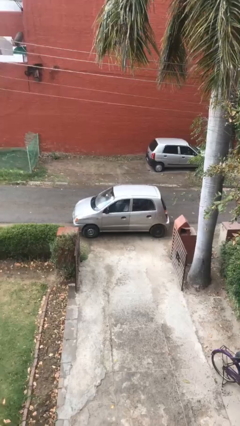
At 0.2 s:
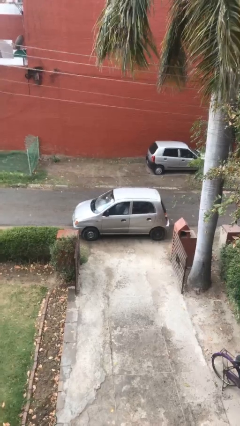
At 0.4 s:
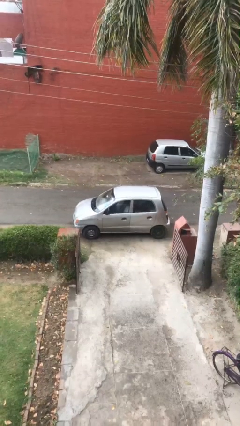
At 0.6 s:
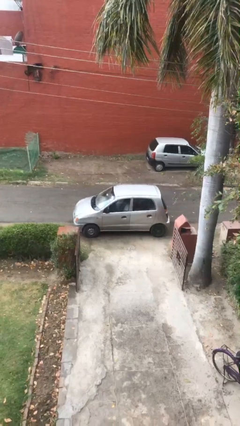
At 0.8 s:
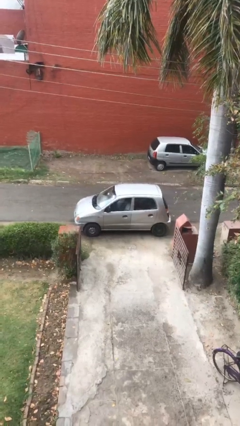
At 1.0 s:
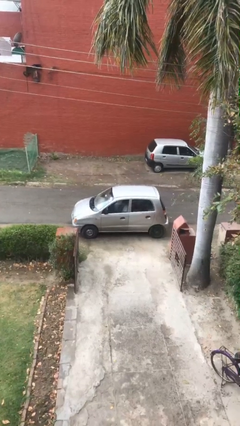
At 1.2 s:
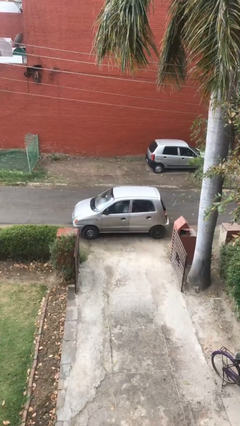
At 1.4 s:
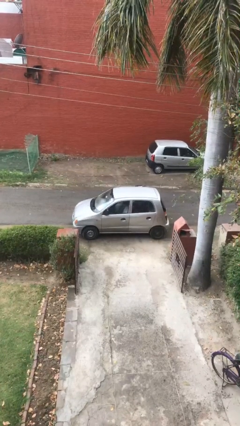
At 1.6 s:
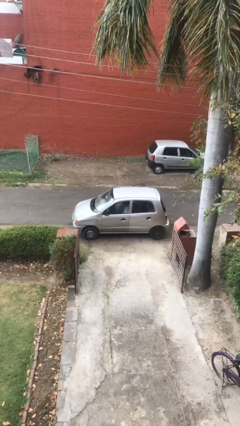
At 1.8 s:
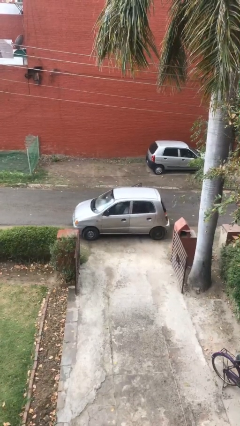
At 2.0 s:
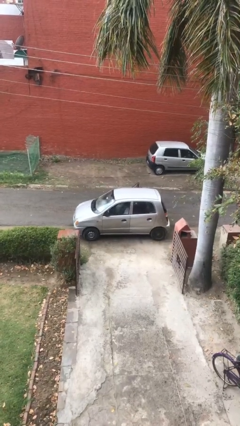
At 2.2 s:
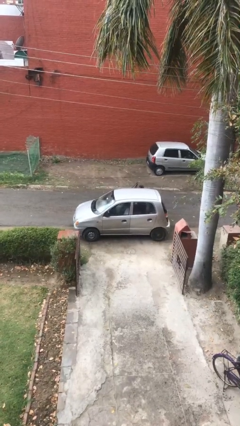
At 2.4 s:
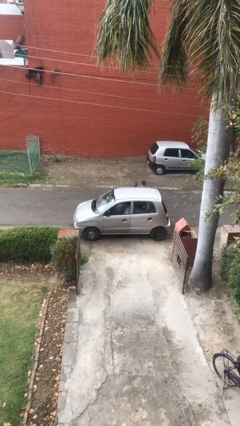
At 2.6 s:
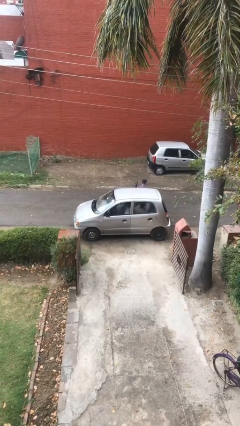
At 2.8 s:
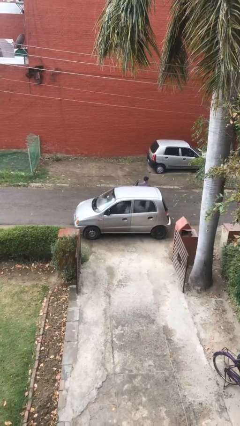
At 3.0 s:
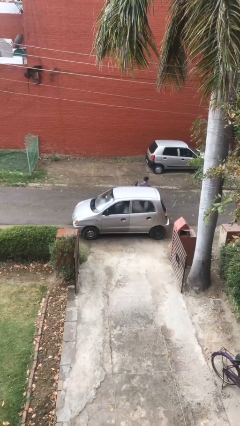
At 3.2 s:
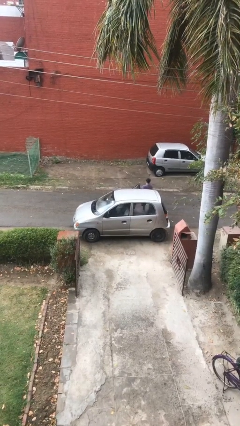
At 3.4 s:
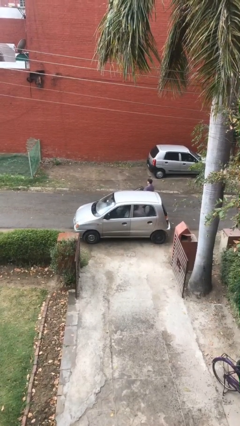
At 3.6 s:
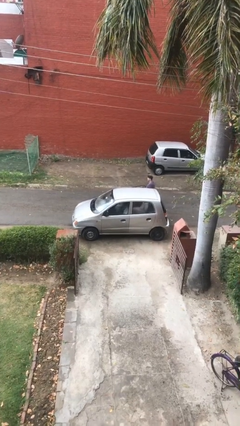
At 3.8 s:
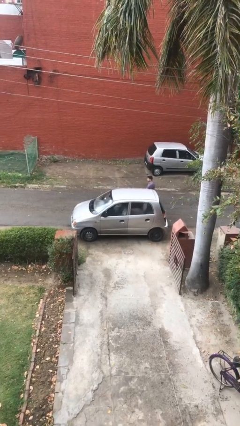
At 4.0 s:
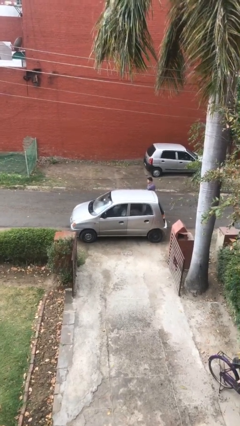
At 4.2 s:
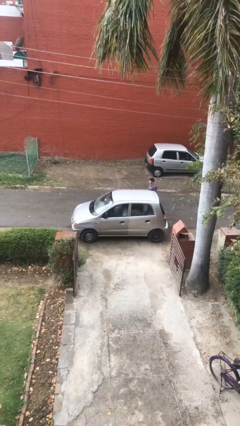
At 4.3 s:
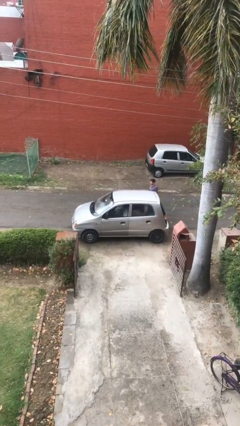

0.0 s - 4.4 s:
car drops off person

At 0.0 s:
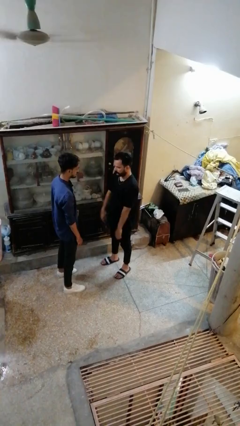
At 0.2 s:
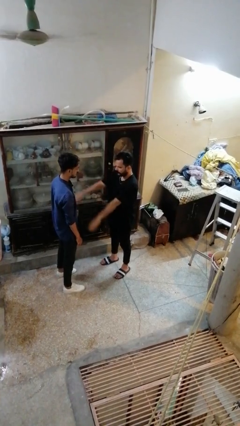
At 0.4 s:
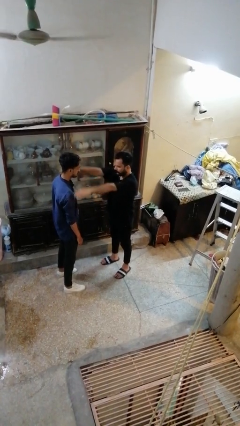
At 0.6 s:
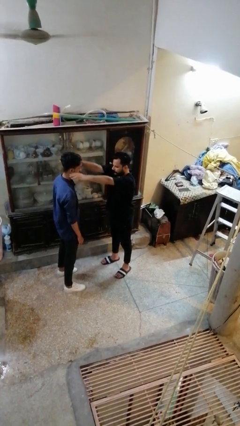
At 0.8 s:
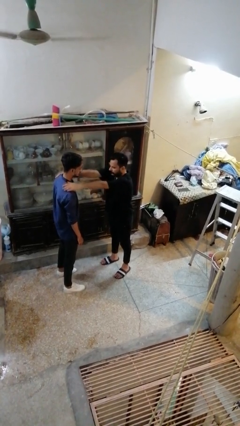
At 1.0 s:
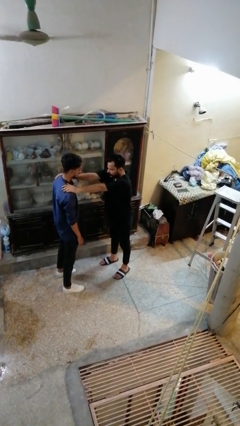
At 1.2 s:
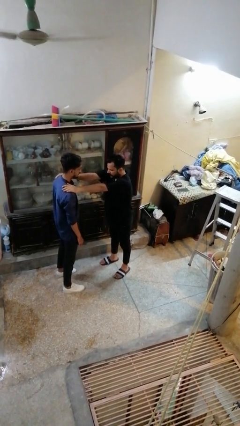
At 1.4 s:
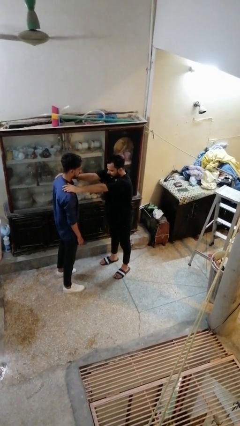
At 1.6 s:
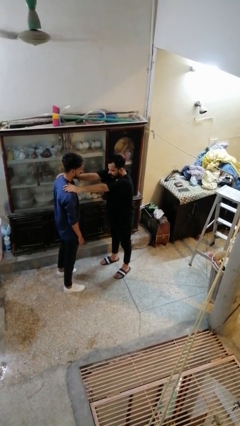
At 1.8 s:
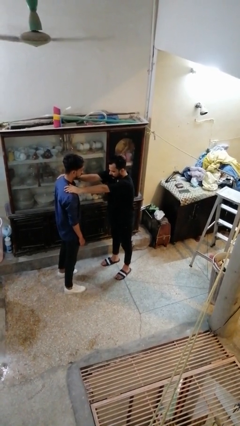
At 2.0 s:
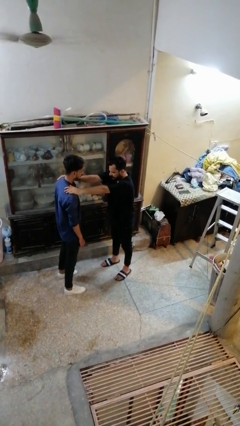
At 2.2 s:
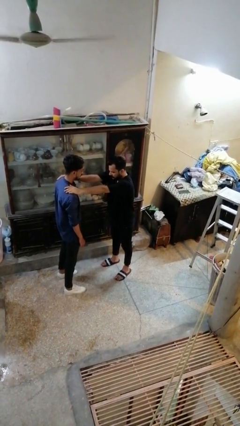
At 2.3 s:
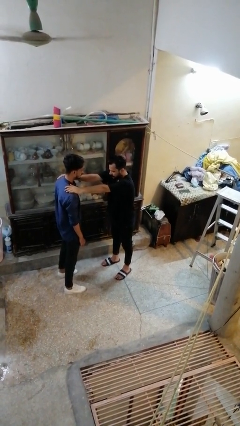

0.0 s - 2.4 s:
person pounds shoulders of person

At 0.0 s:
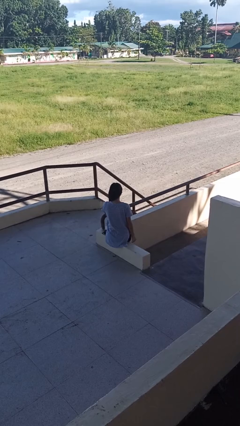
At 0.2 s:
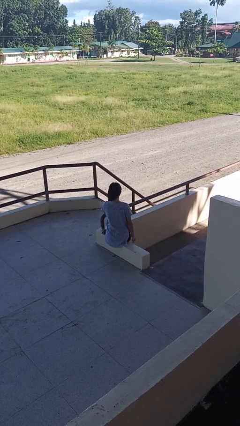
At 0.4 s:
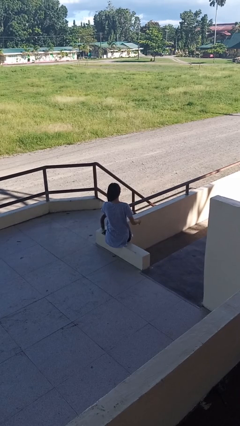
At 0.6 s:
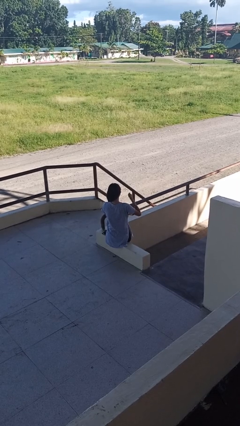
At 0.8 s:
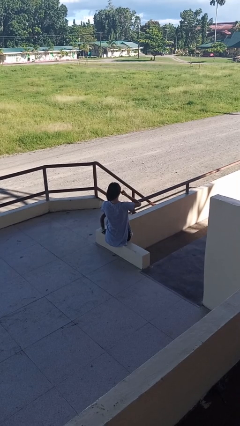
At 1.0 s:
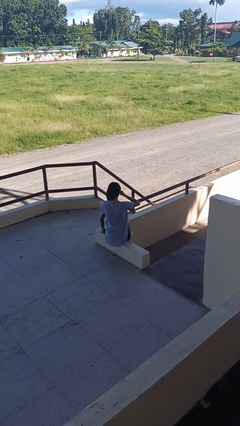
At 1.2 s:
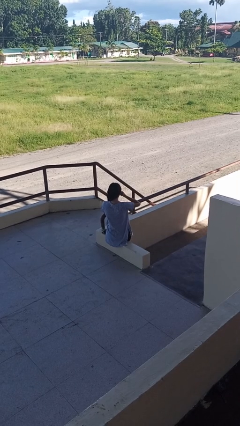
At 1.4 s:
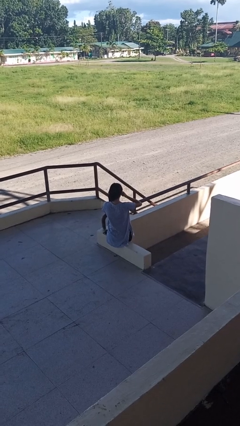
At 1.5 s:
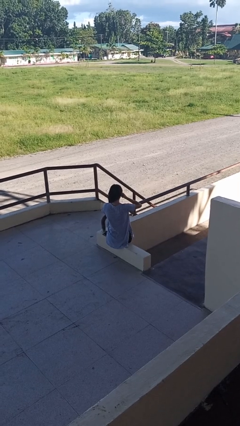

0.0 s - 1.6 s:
person gestures call me

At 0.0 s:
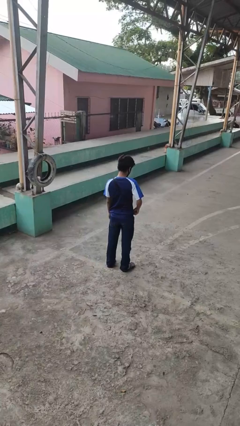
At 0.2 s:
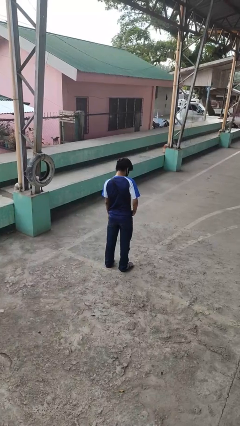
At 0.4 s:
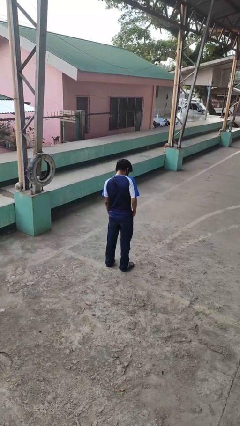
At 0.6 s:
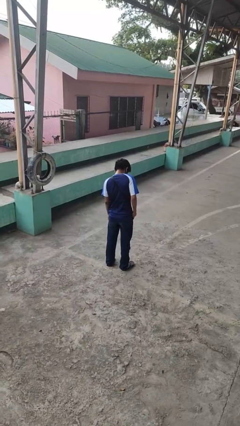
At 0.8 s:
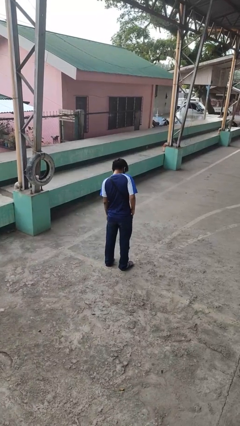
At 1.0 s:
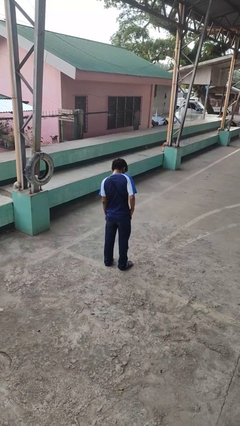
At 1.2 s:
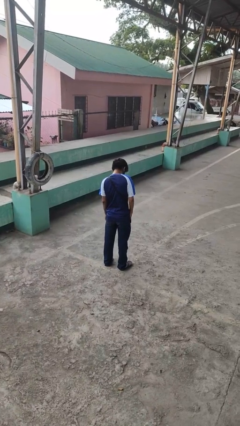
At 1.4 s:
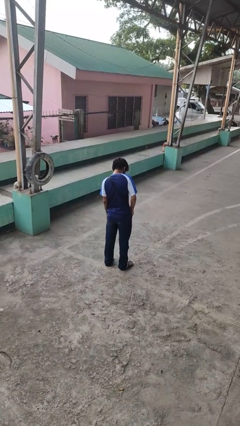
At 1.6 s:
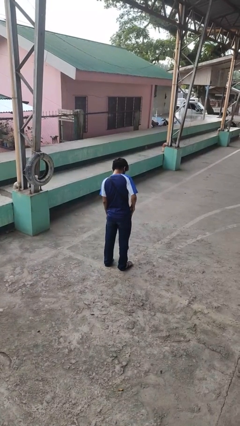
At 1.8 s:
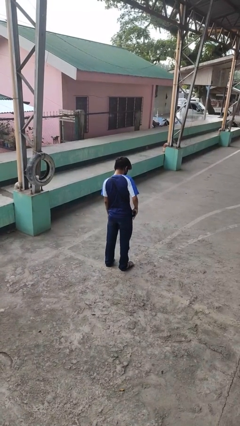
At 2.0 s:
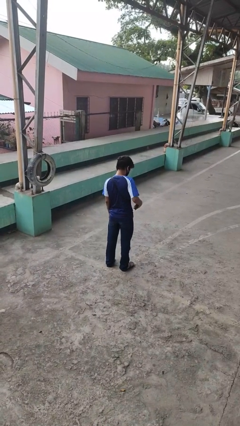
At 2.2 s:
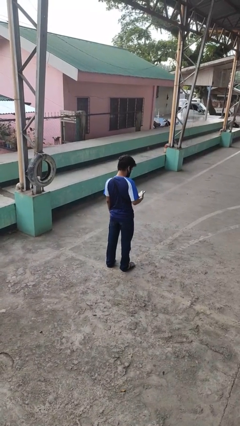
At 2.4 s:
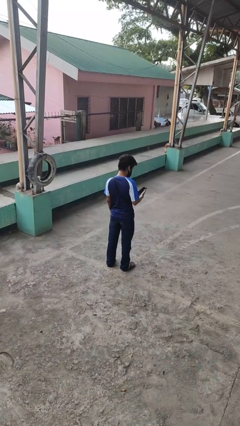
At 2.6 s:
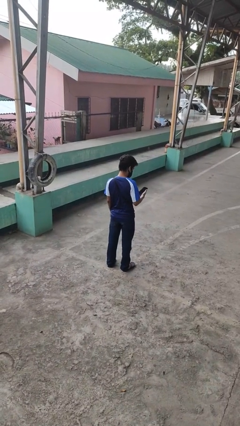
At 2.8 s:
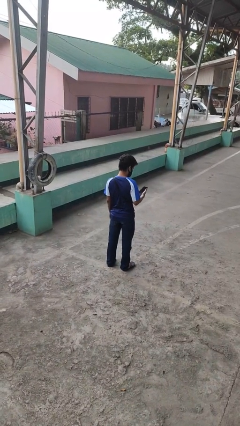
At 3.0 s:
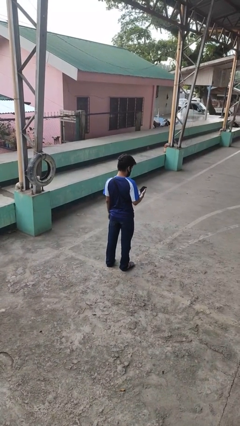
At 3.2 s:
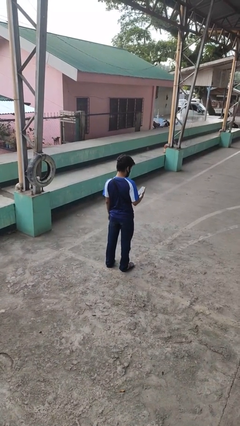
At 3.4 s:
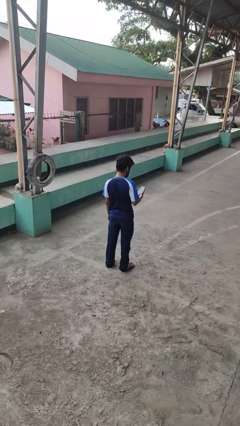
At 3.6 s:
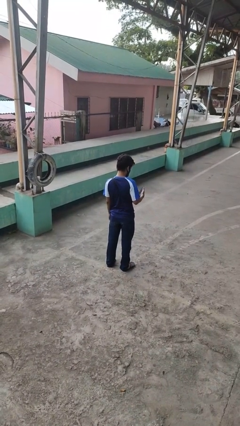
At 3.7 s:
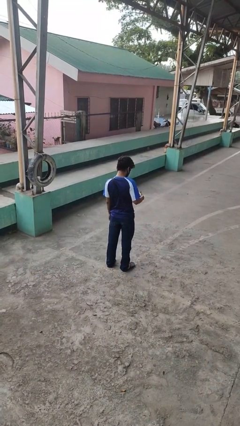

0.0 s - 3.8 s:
person takes phone from pocket

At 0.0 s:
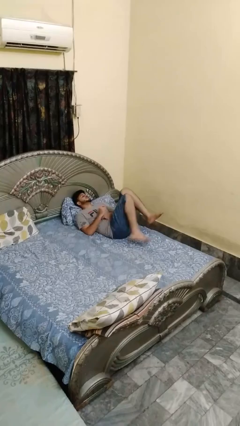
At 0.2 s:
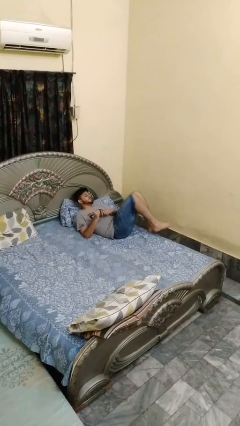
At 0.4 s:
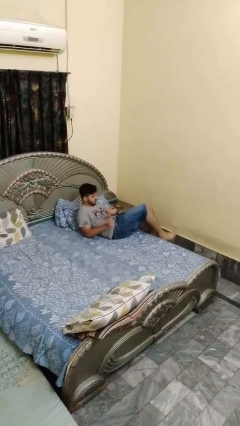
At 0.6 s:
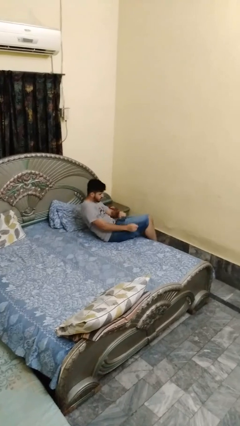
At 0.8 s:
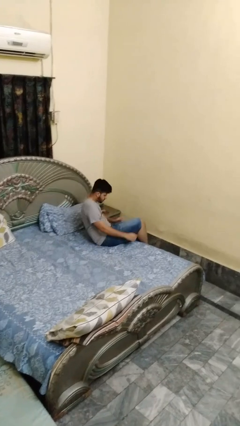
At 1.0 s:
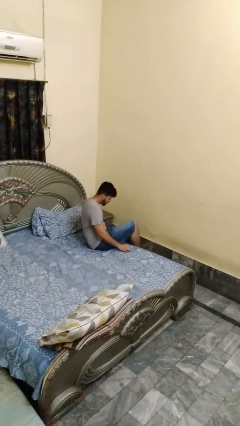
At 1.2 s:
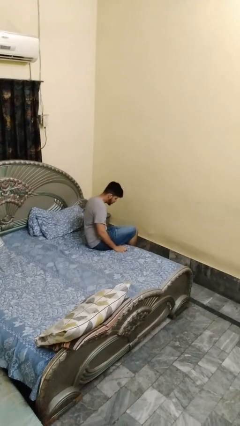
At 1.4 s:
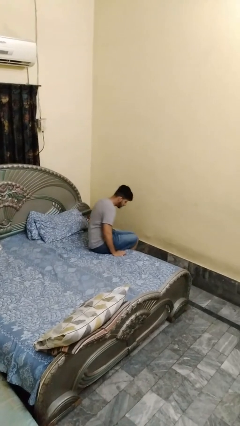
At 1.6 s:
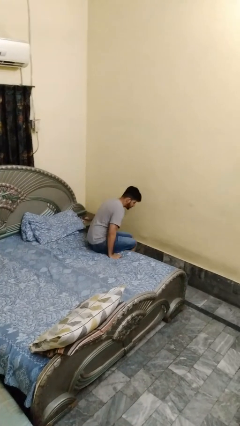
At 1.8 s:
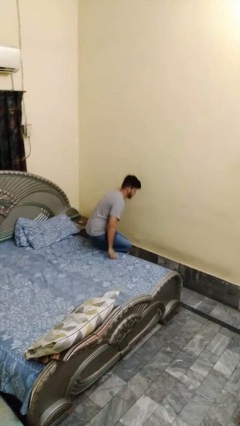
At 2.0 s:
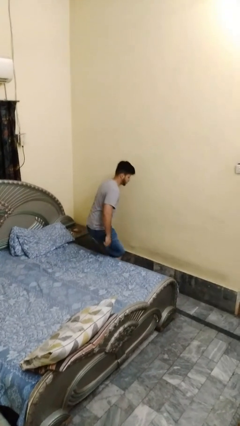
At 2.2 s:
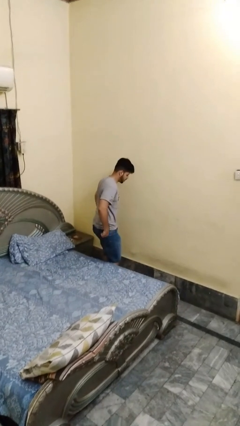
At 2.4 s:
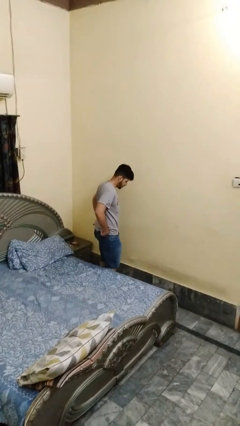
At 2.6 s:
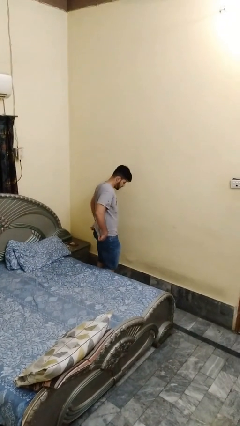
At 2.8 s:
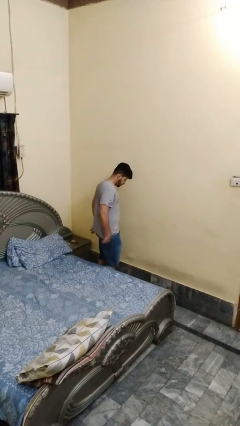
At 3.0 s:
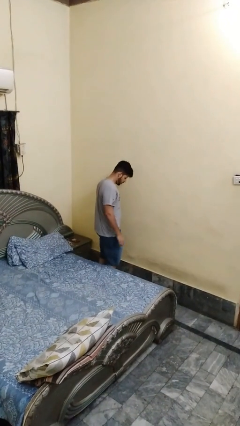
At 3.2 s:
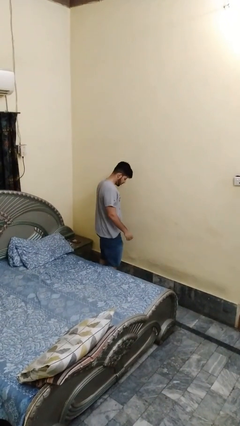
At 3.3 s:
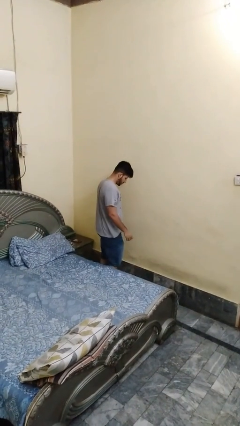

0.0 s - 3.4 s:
person stands up

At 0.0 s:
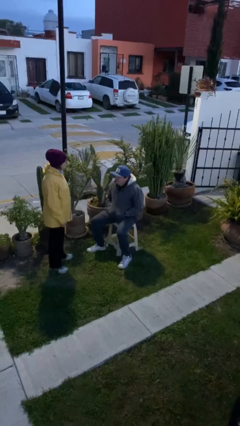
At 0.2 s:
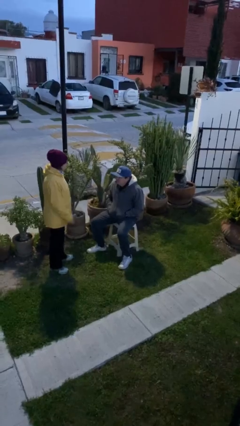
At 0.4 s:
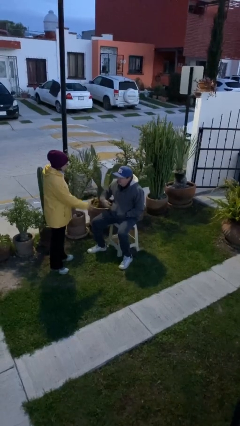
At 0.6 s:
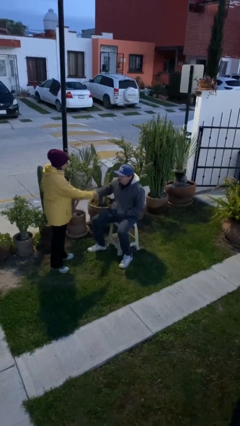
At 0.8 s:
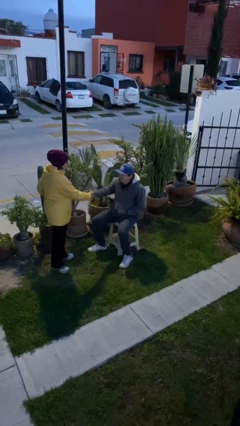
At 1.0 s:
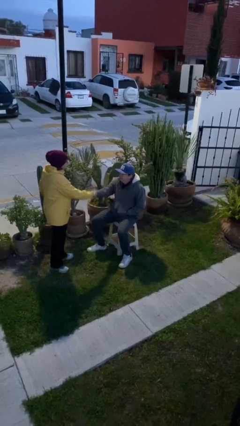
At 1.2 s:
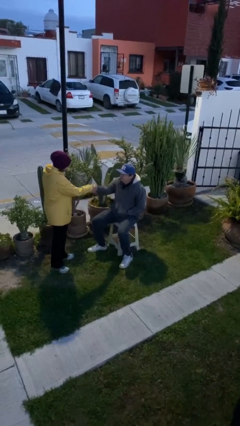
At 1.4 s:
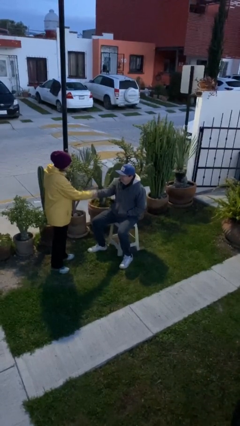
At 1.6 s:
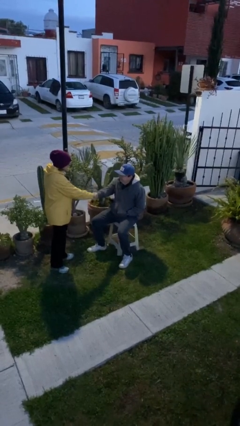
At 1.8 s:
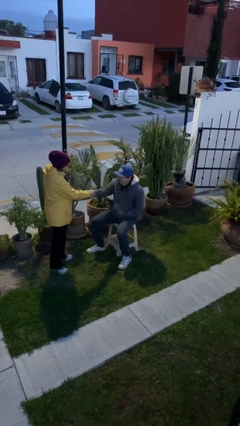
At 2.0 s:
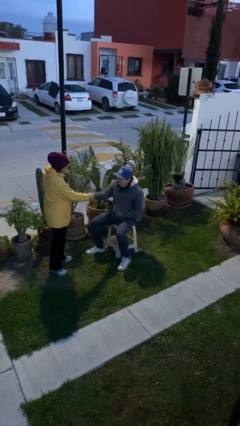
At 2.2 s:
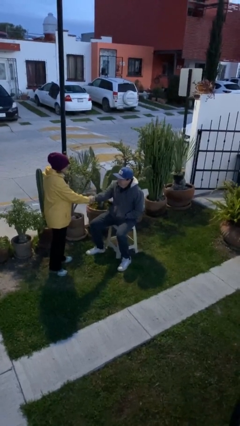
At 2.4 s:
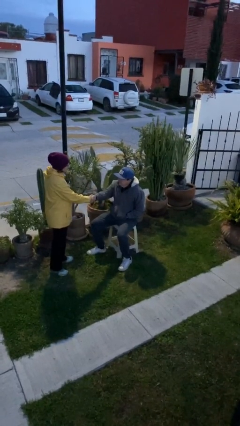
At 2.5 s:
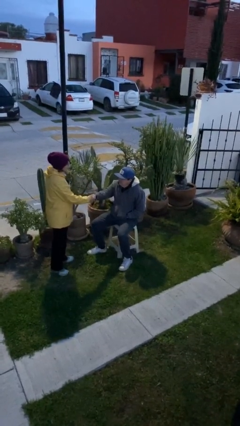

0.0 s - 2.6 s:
person shakes hand
